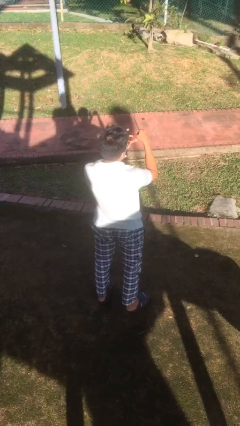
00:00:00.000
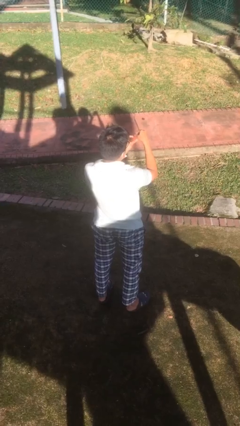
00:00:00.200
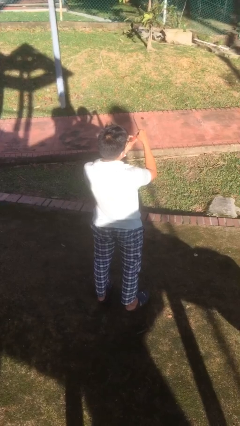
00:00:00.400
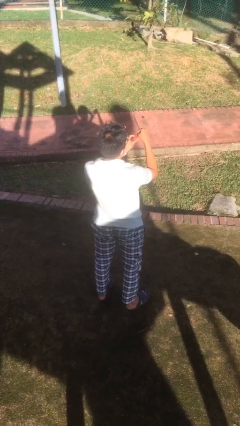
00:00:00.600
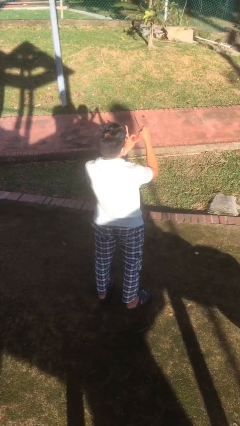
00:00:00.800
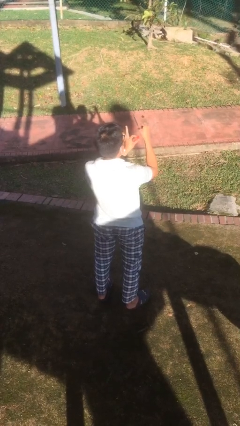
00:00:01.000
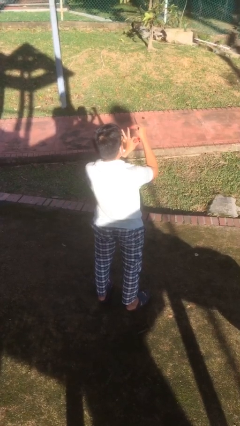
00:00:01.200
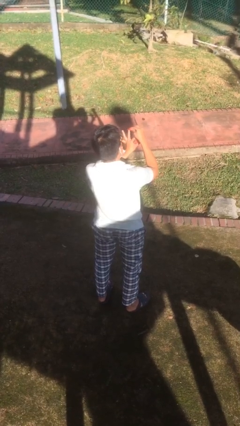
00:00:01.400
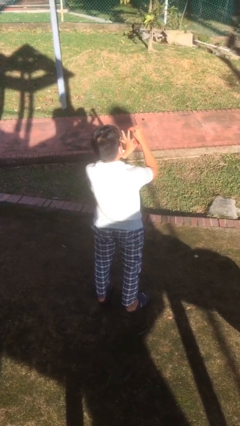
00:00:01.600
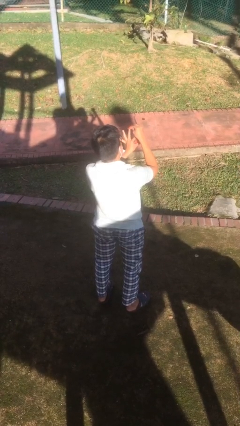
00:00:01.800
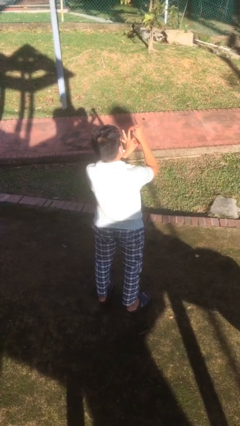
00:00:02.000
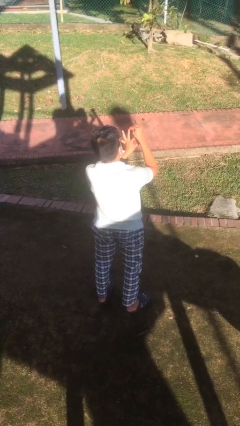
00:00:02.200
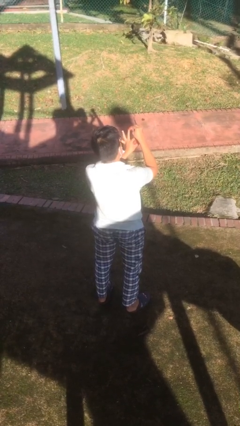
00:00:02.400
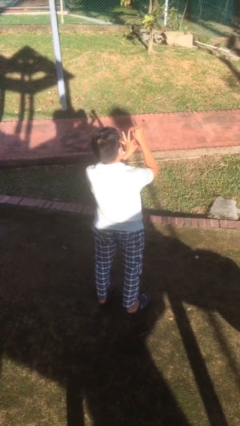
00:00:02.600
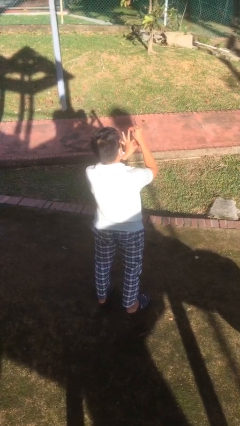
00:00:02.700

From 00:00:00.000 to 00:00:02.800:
person paints fingernails

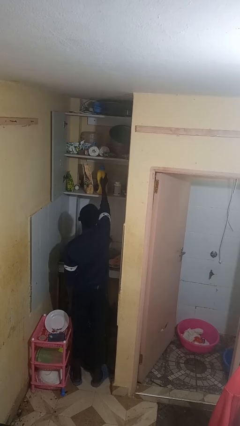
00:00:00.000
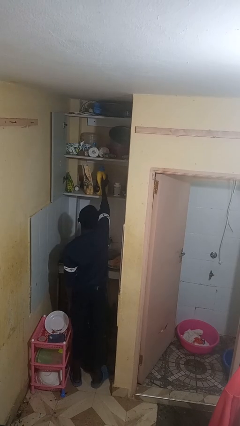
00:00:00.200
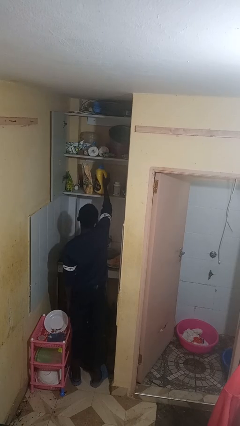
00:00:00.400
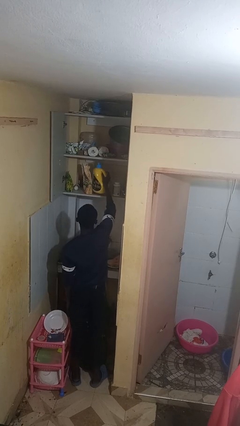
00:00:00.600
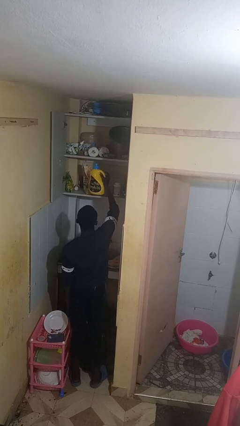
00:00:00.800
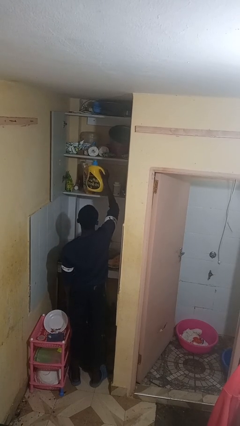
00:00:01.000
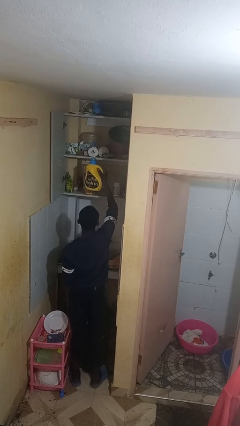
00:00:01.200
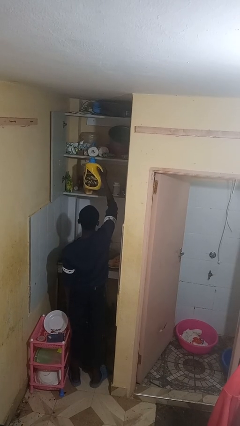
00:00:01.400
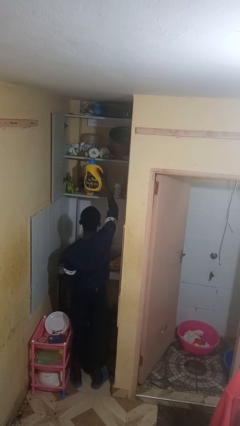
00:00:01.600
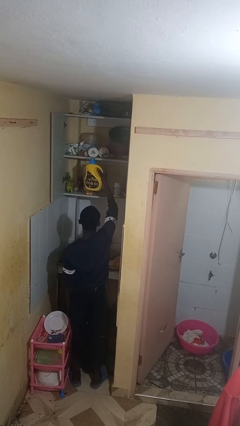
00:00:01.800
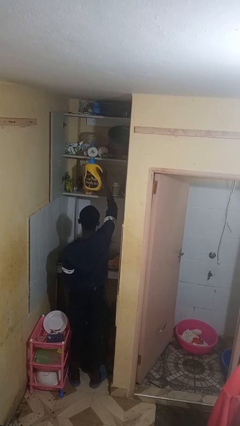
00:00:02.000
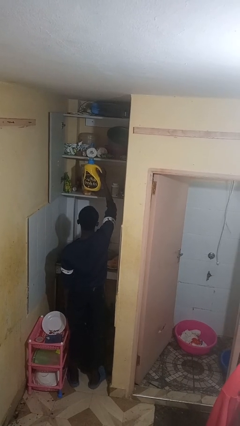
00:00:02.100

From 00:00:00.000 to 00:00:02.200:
person takes object from cabinet

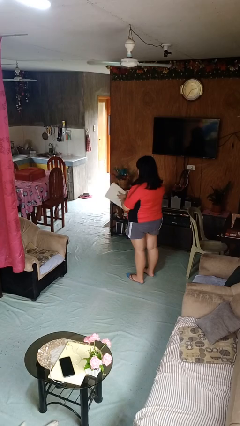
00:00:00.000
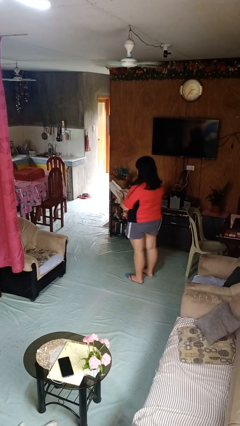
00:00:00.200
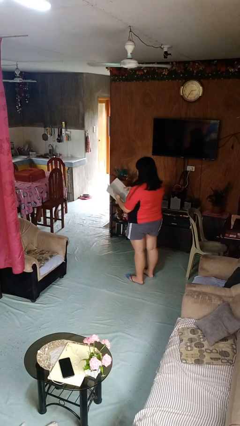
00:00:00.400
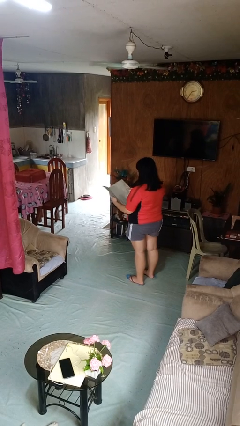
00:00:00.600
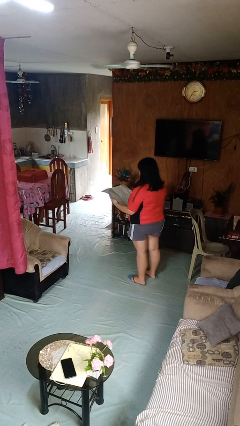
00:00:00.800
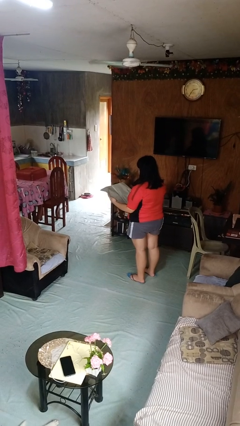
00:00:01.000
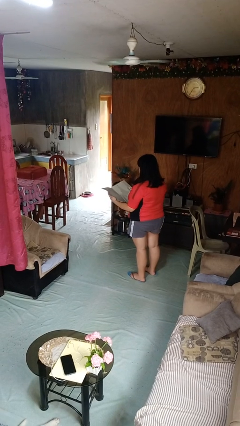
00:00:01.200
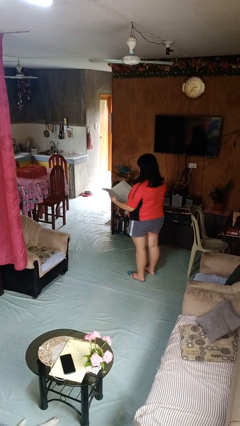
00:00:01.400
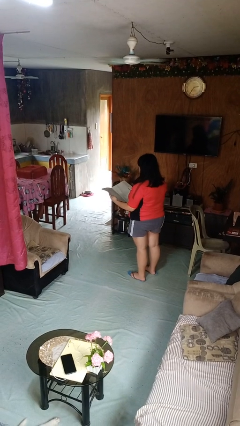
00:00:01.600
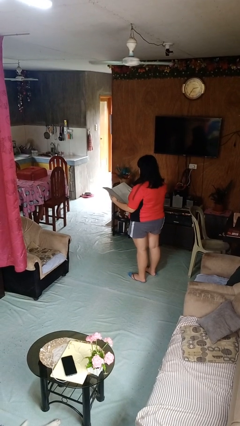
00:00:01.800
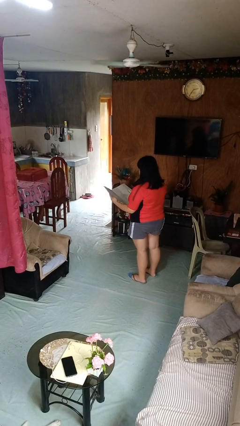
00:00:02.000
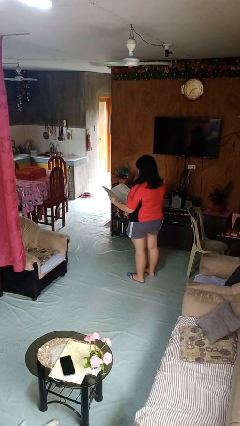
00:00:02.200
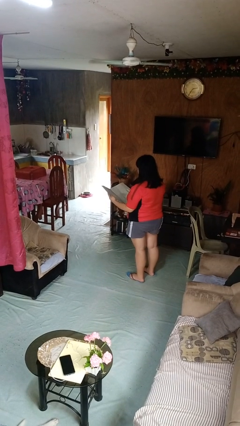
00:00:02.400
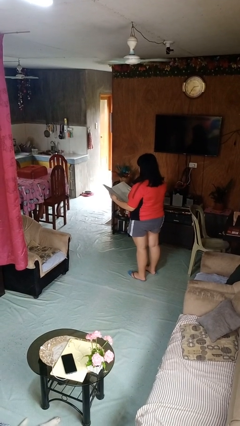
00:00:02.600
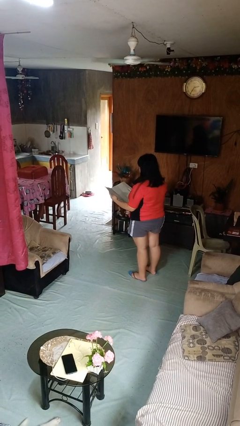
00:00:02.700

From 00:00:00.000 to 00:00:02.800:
person reads newspaper

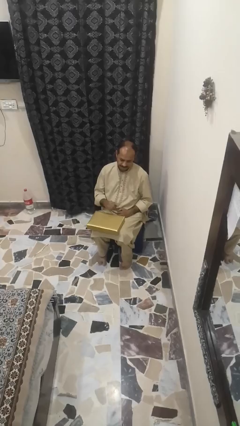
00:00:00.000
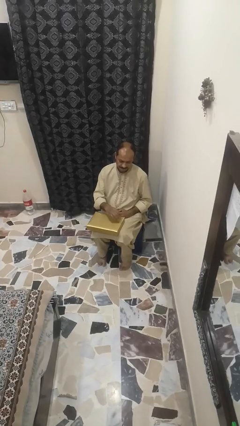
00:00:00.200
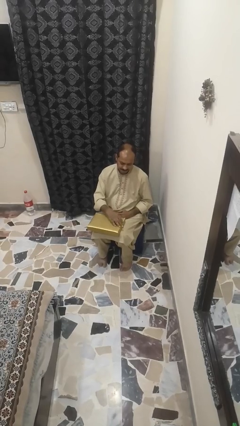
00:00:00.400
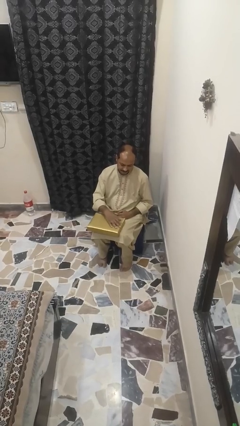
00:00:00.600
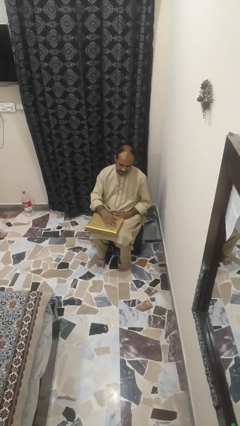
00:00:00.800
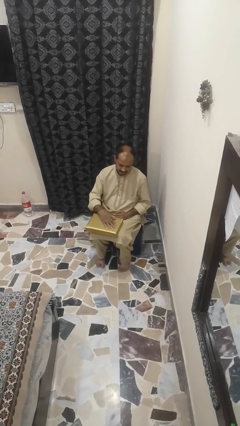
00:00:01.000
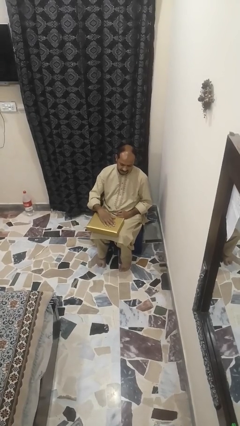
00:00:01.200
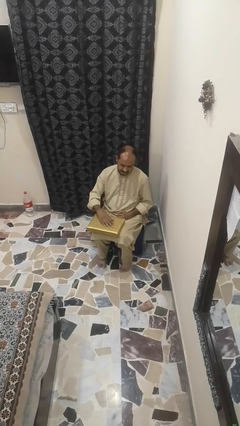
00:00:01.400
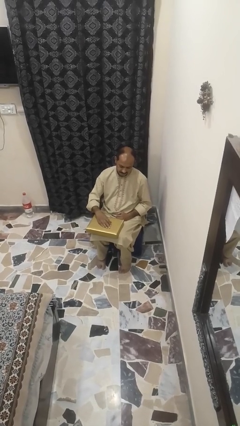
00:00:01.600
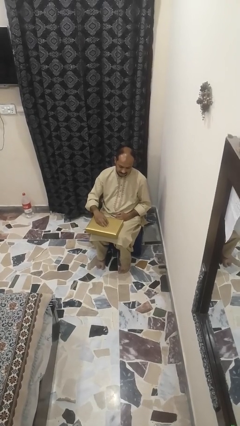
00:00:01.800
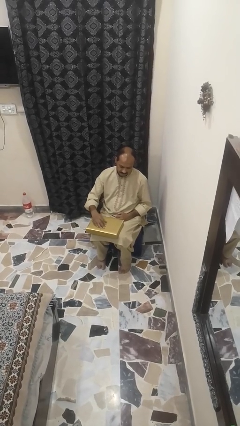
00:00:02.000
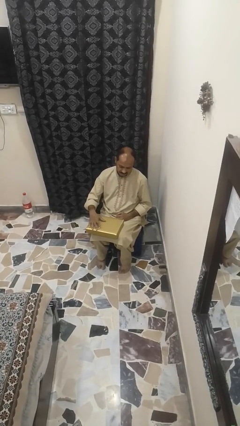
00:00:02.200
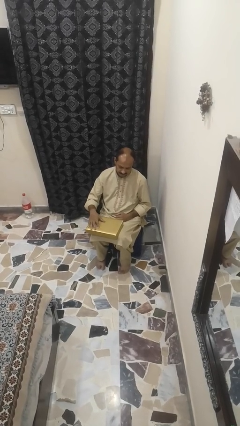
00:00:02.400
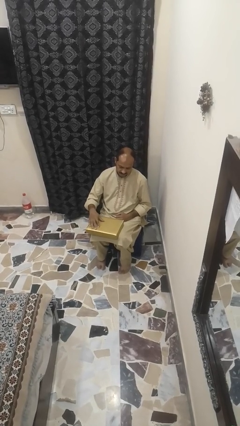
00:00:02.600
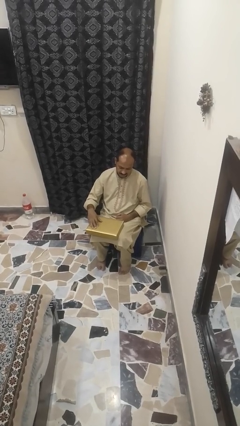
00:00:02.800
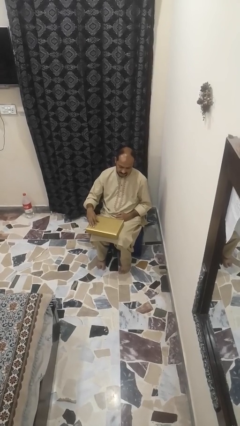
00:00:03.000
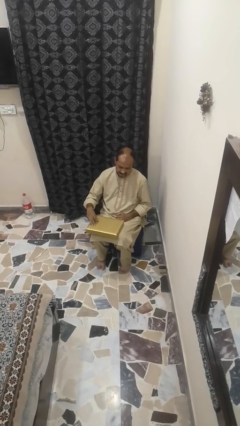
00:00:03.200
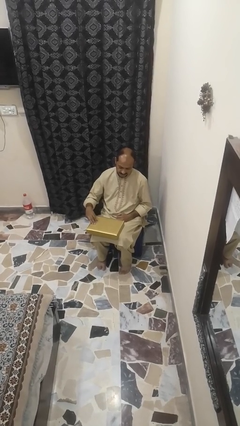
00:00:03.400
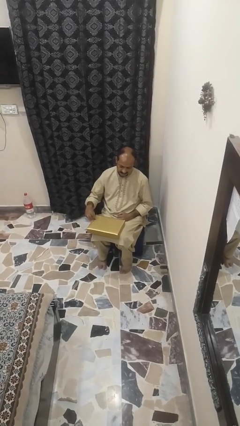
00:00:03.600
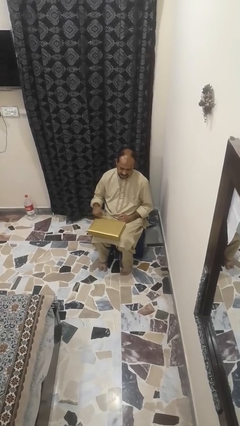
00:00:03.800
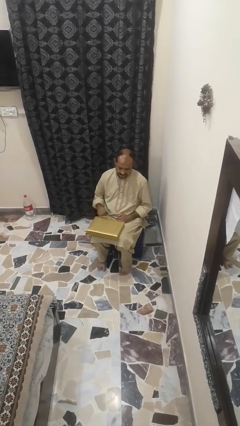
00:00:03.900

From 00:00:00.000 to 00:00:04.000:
person waves hand over object

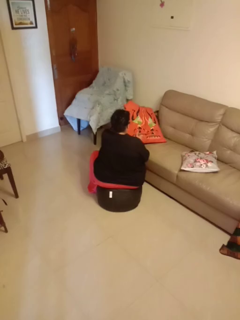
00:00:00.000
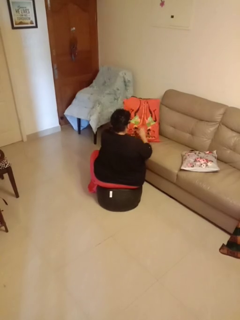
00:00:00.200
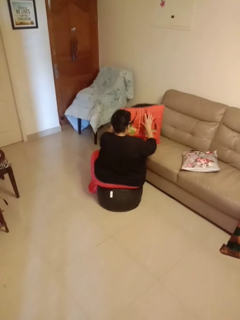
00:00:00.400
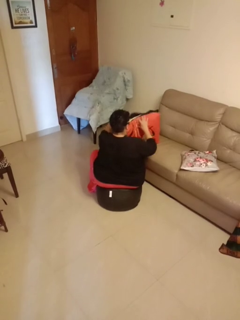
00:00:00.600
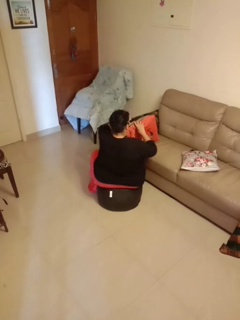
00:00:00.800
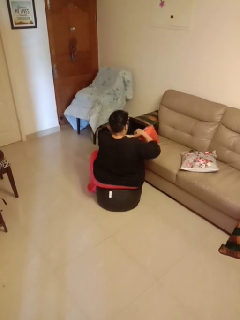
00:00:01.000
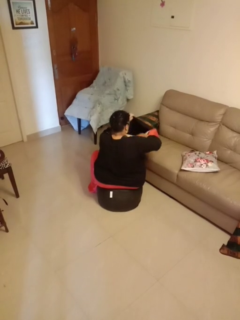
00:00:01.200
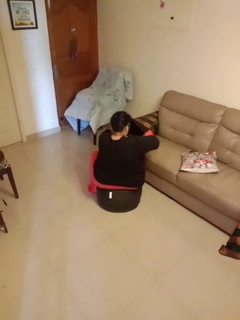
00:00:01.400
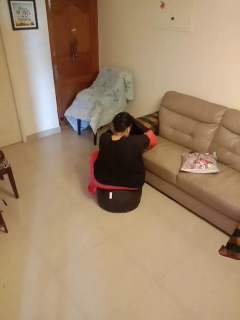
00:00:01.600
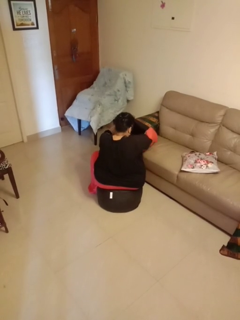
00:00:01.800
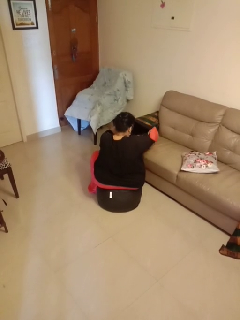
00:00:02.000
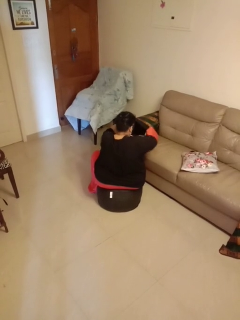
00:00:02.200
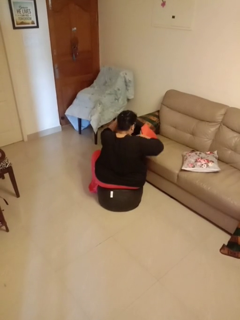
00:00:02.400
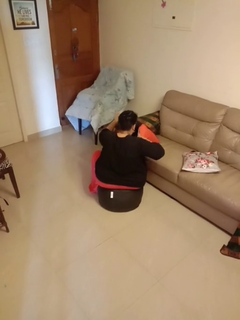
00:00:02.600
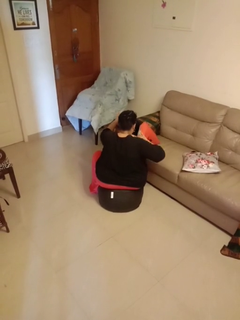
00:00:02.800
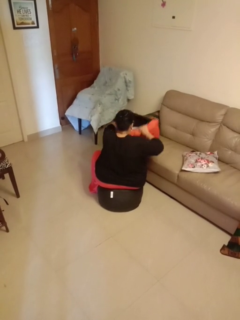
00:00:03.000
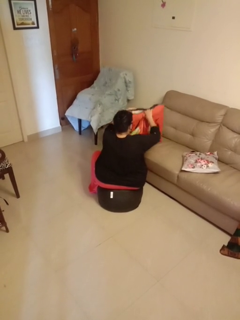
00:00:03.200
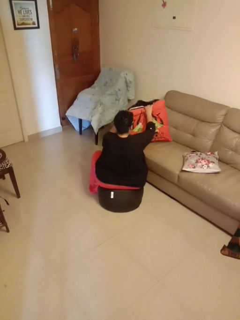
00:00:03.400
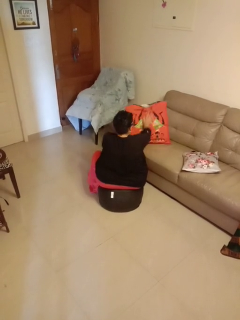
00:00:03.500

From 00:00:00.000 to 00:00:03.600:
person searches in couch

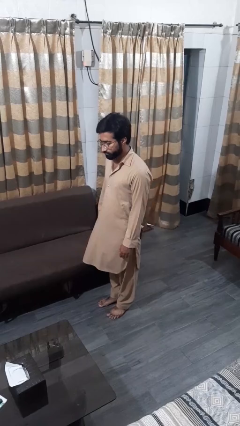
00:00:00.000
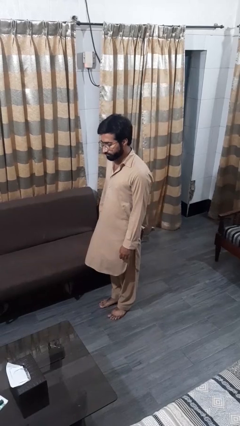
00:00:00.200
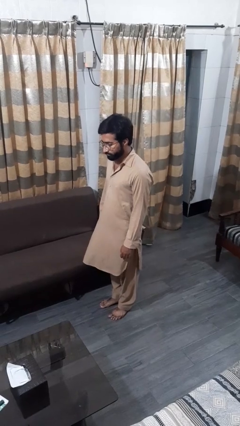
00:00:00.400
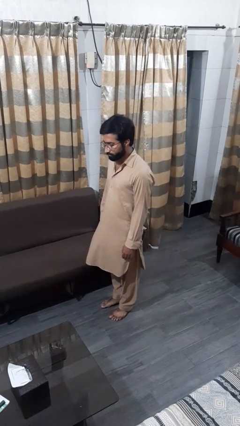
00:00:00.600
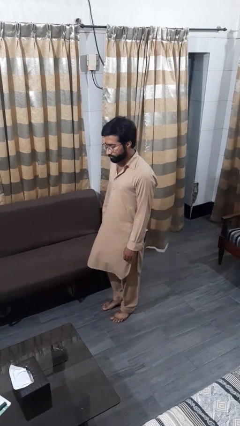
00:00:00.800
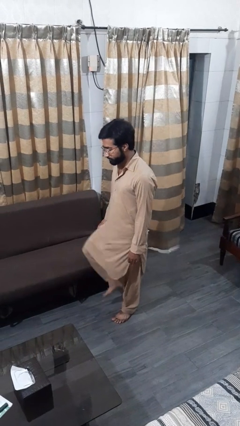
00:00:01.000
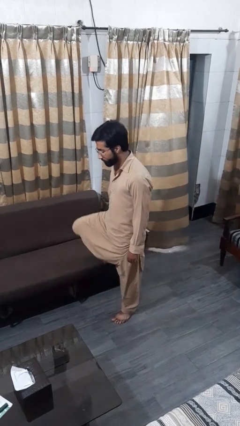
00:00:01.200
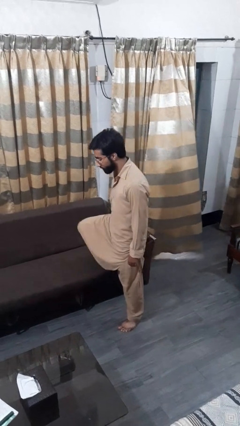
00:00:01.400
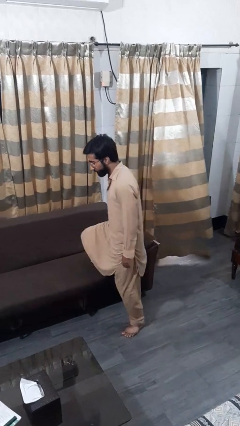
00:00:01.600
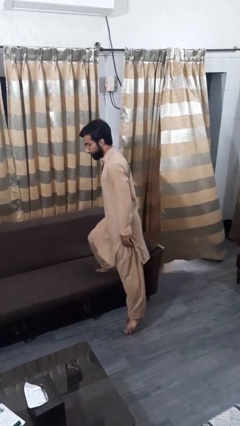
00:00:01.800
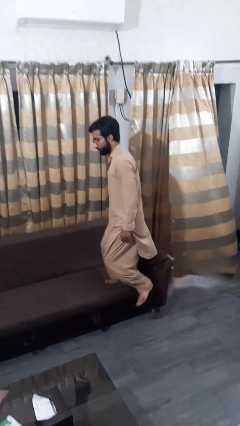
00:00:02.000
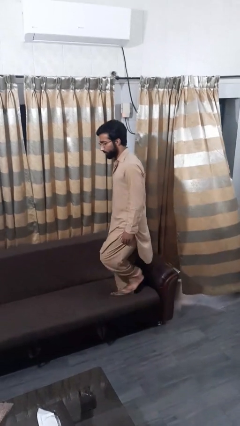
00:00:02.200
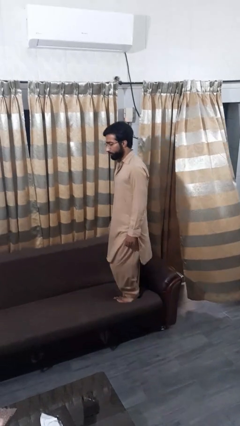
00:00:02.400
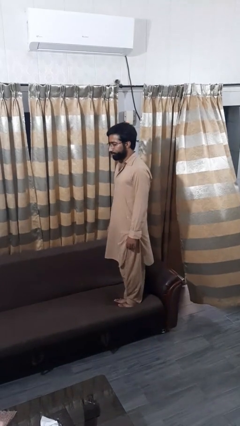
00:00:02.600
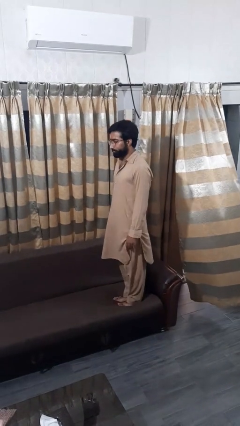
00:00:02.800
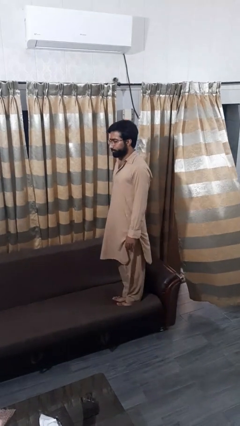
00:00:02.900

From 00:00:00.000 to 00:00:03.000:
person climbs on couch
